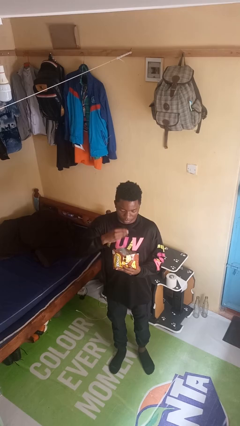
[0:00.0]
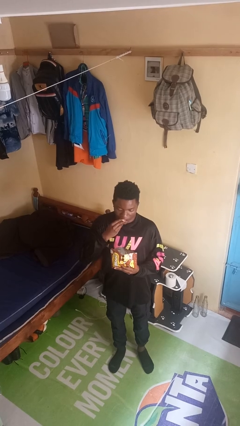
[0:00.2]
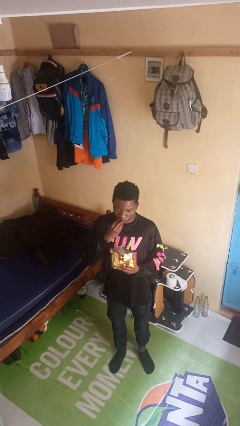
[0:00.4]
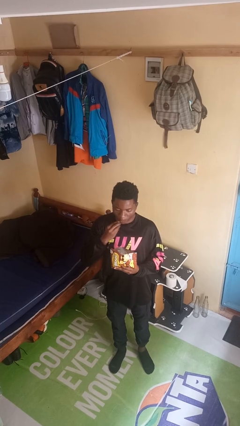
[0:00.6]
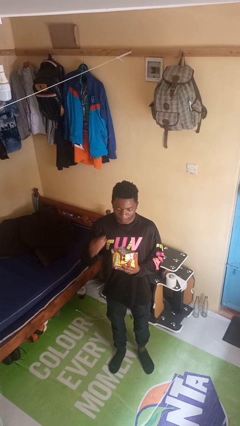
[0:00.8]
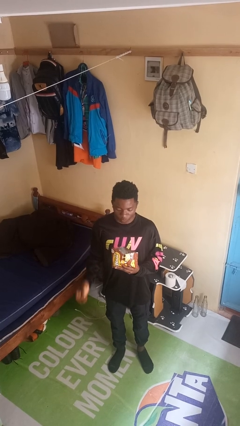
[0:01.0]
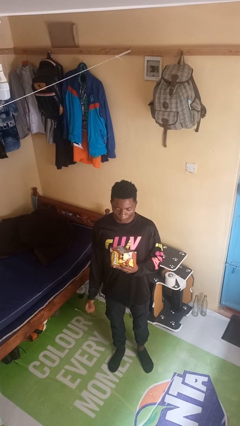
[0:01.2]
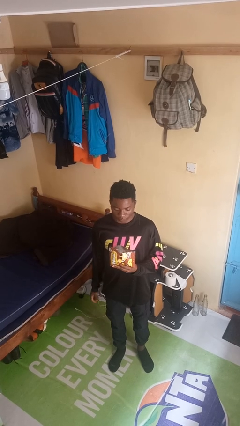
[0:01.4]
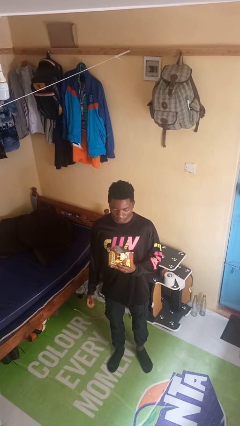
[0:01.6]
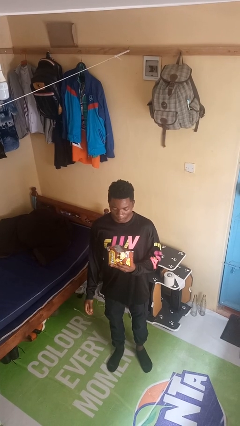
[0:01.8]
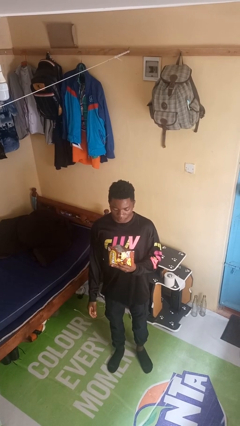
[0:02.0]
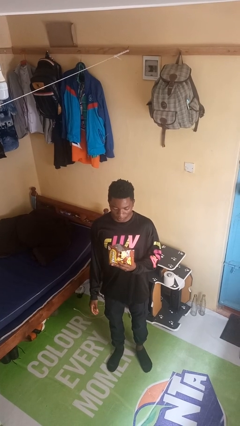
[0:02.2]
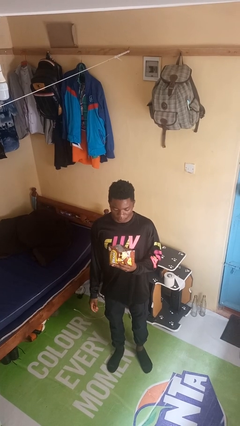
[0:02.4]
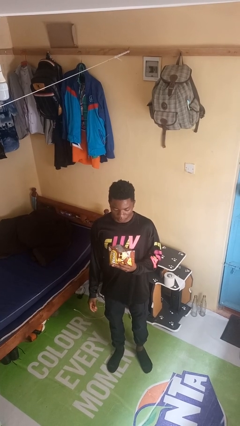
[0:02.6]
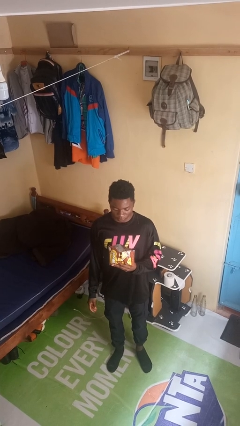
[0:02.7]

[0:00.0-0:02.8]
person eats snack from bag

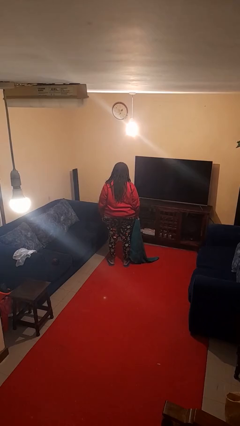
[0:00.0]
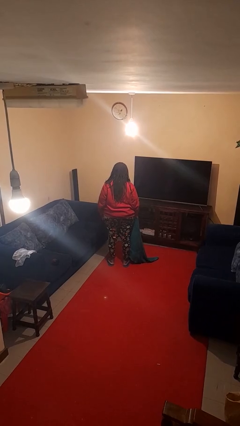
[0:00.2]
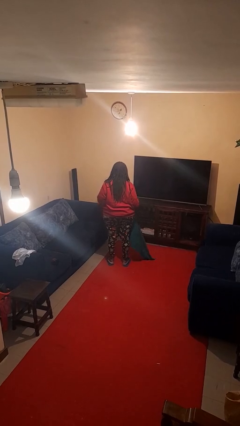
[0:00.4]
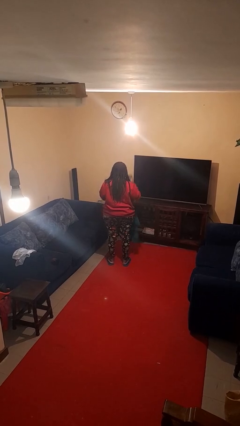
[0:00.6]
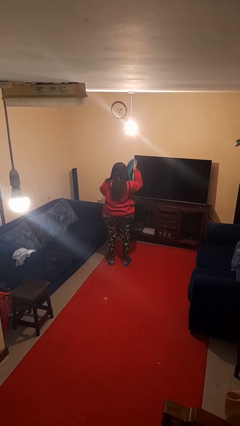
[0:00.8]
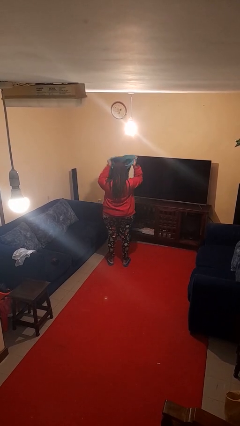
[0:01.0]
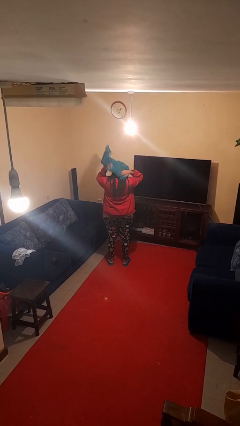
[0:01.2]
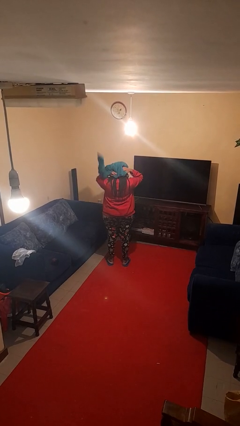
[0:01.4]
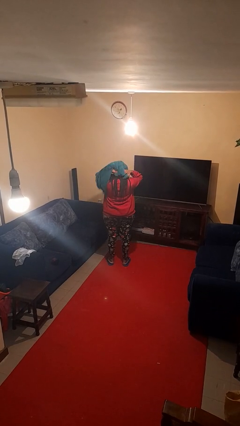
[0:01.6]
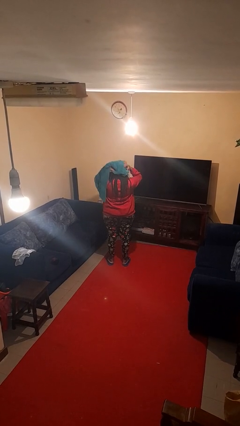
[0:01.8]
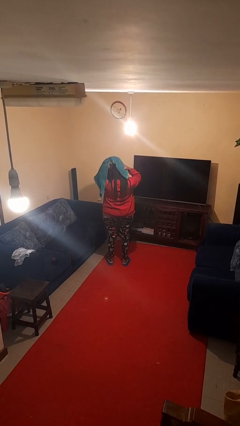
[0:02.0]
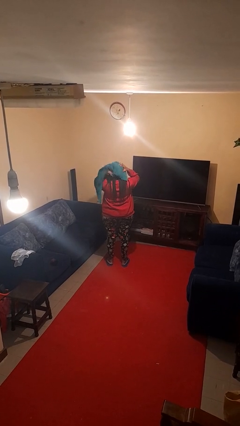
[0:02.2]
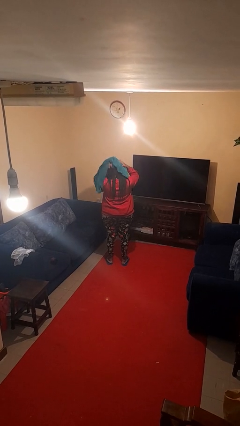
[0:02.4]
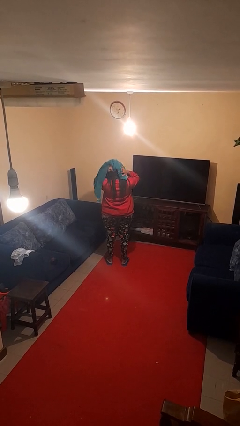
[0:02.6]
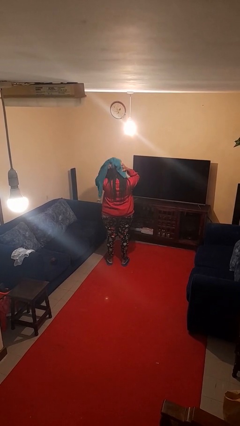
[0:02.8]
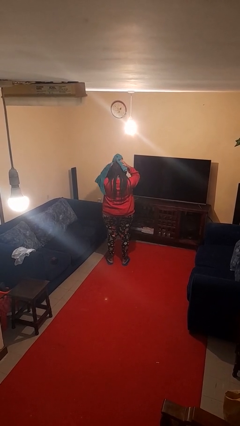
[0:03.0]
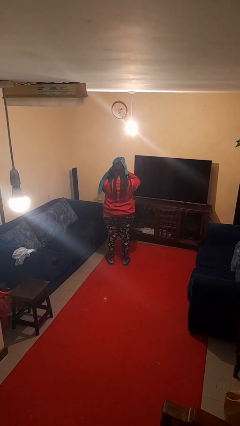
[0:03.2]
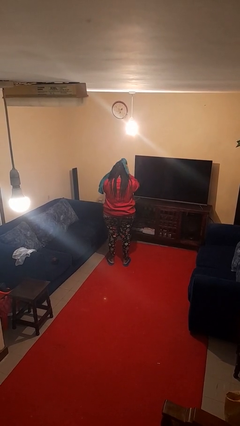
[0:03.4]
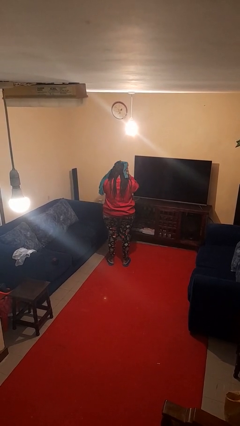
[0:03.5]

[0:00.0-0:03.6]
person dries hair with towel

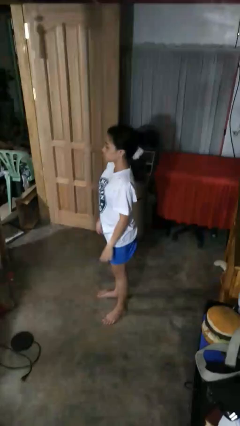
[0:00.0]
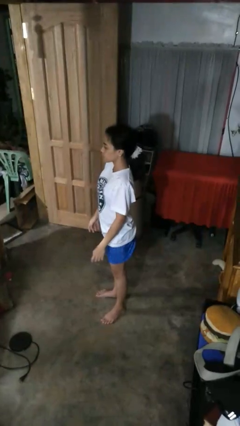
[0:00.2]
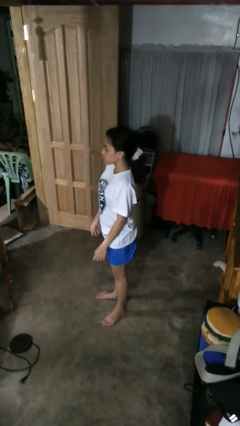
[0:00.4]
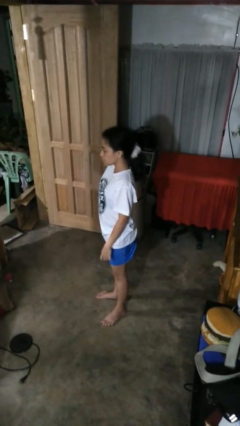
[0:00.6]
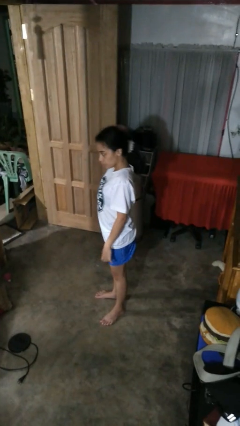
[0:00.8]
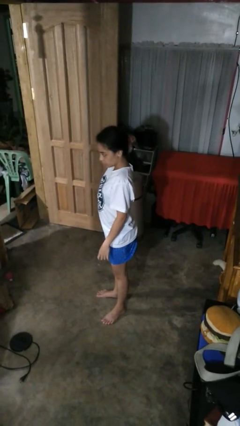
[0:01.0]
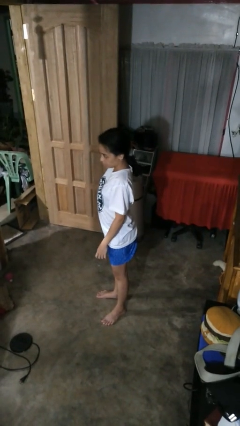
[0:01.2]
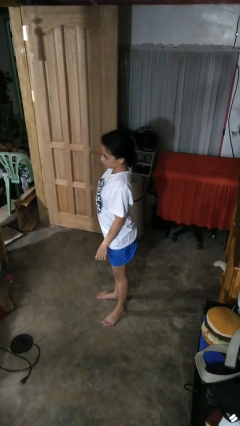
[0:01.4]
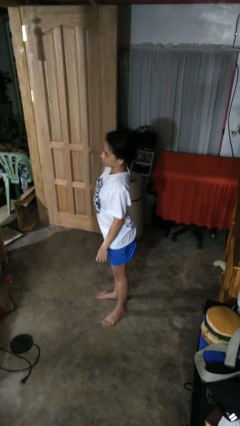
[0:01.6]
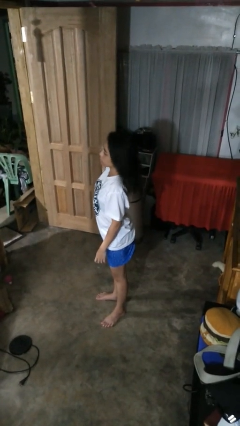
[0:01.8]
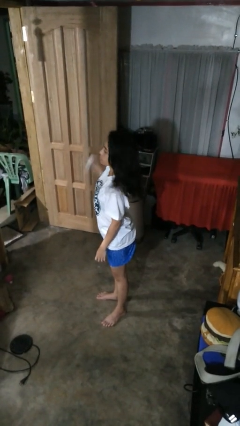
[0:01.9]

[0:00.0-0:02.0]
person takes off hairtie

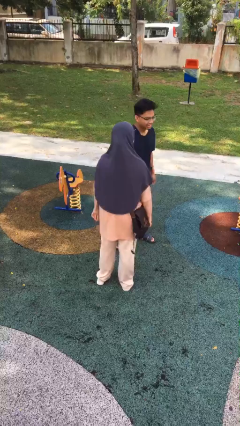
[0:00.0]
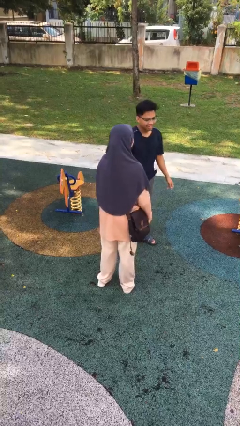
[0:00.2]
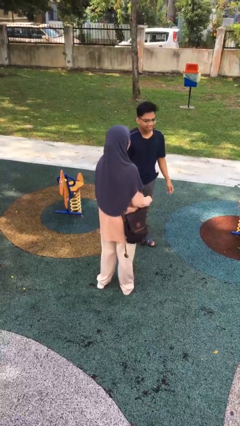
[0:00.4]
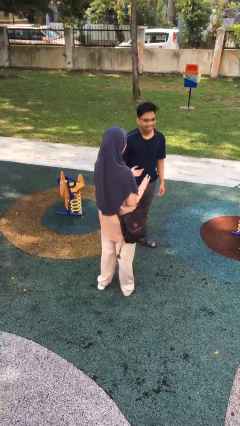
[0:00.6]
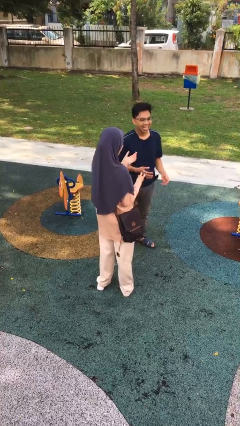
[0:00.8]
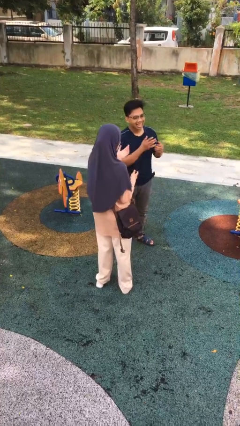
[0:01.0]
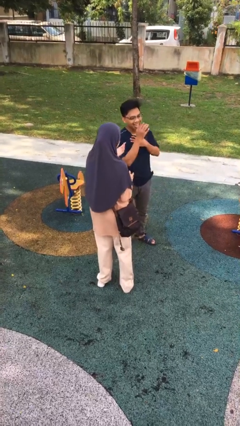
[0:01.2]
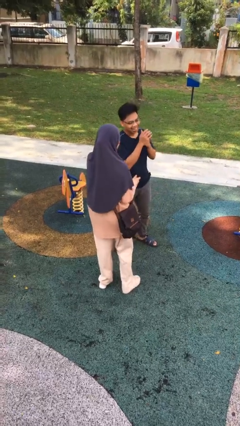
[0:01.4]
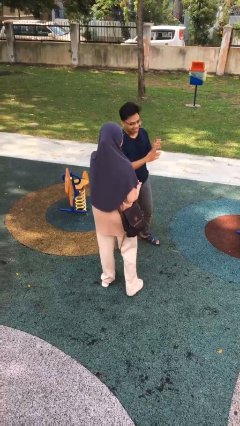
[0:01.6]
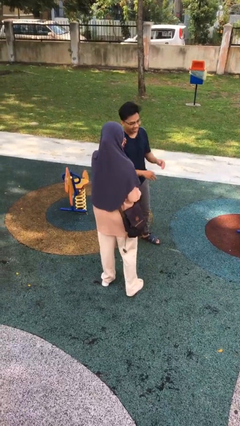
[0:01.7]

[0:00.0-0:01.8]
person laughs with person

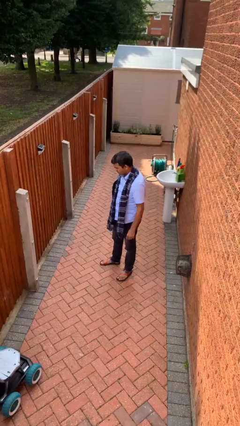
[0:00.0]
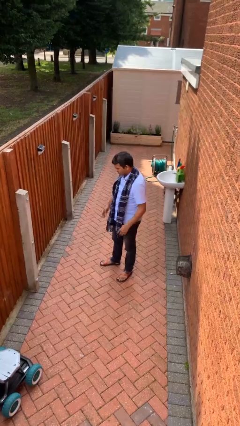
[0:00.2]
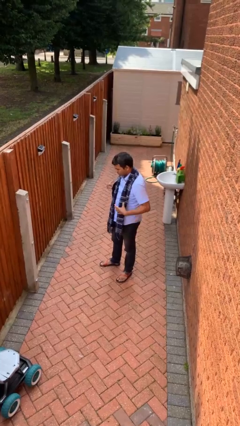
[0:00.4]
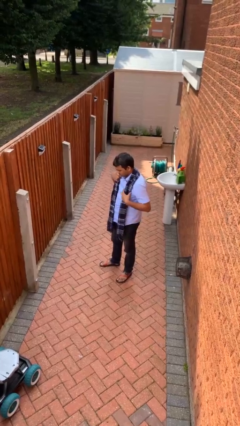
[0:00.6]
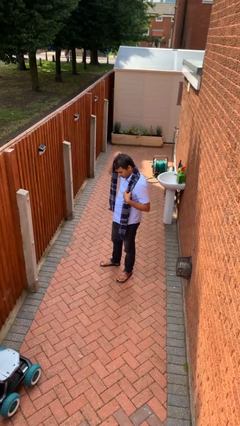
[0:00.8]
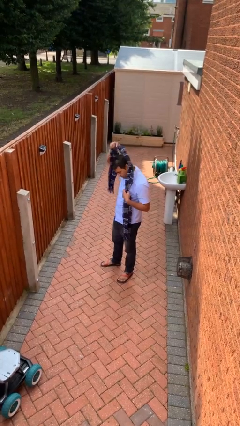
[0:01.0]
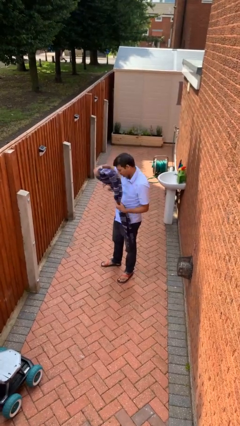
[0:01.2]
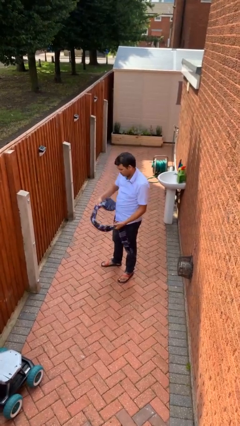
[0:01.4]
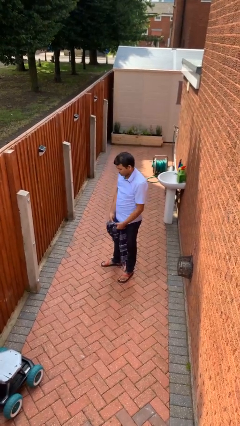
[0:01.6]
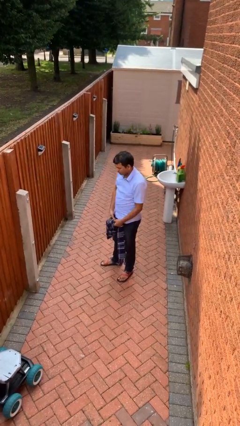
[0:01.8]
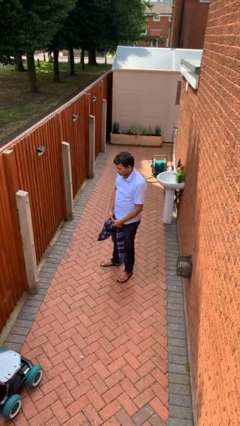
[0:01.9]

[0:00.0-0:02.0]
person takes off scarf

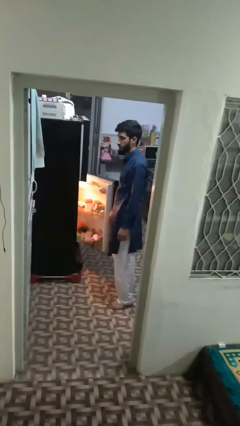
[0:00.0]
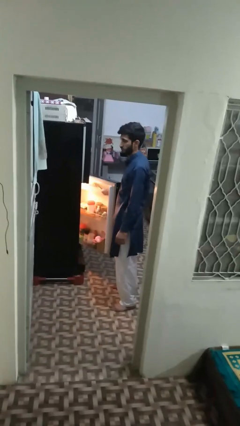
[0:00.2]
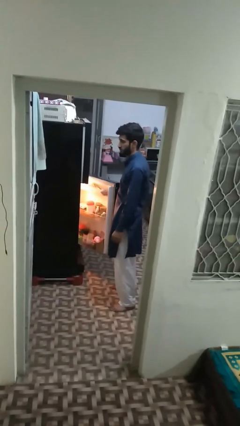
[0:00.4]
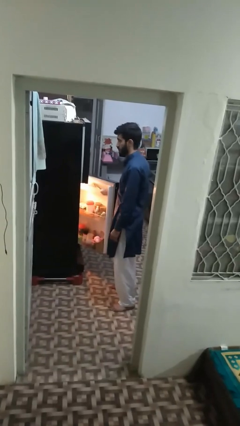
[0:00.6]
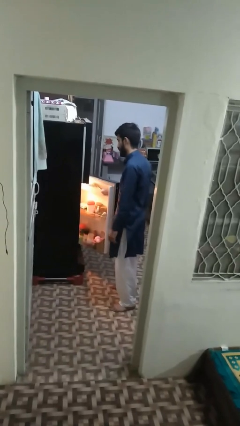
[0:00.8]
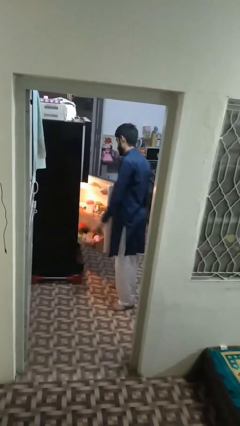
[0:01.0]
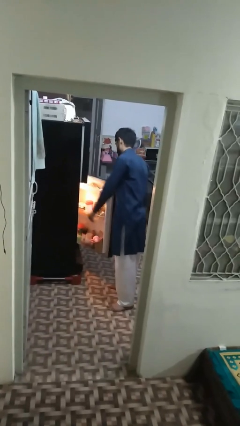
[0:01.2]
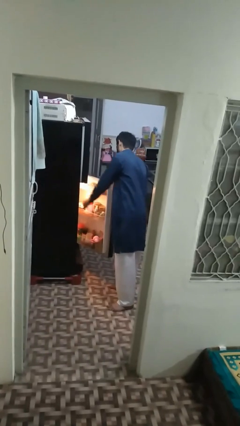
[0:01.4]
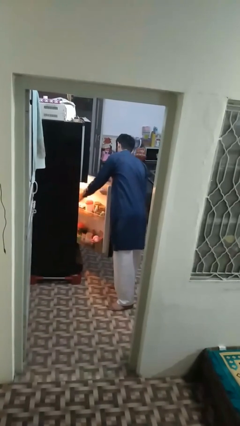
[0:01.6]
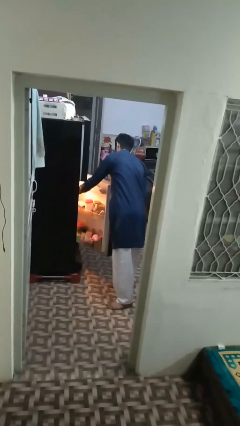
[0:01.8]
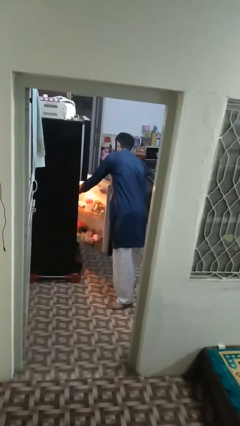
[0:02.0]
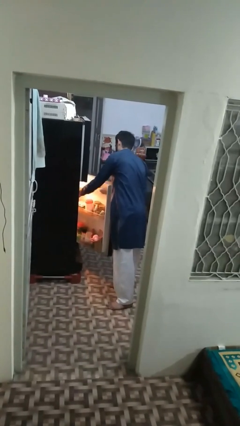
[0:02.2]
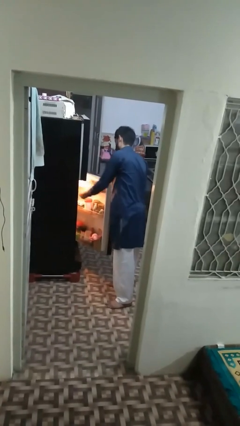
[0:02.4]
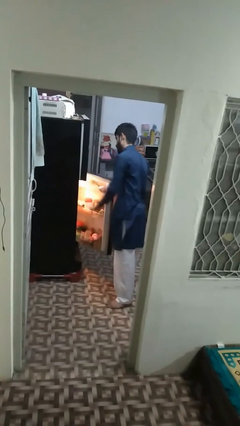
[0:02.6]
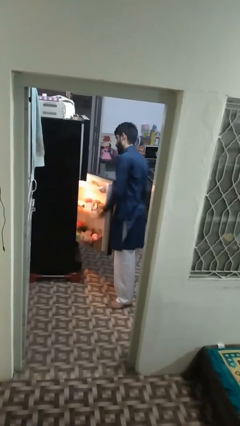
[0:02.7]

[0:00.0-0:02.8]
person takes object from refrigerator

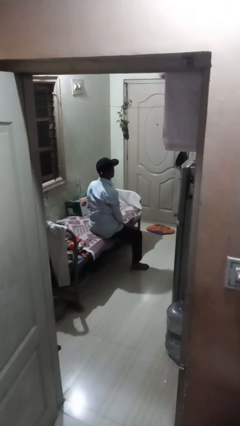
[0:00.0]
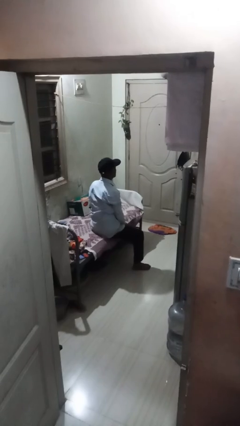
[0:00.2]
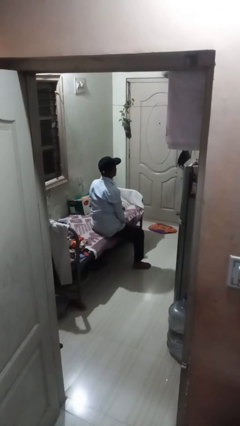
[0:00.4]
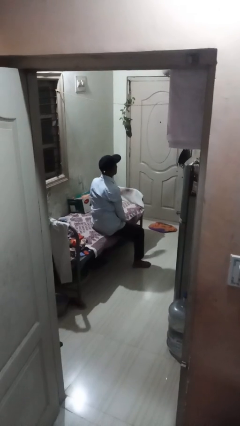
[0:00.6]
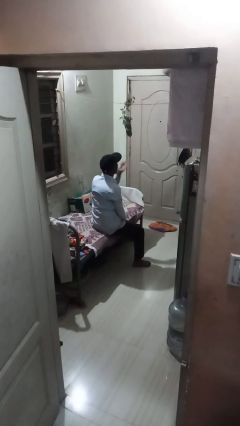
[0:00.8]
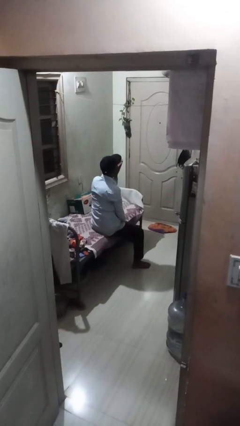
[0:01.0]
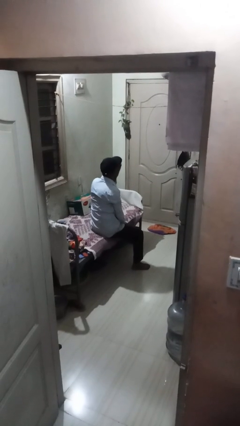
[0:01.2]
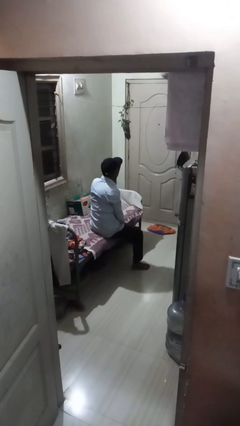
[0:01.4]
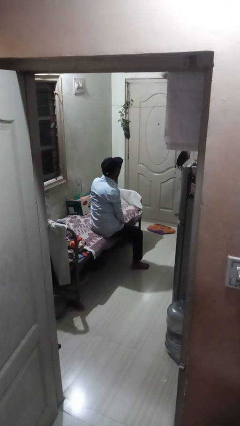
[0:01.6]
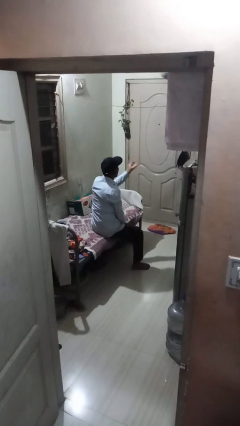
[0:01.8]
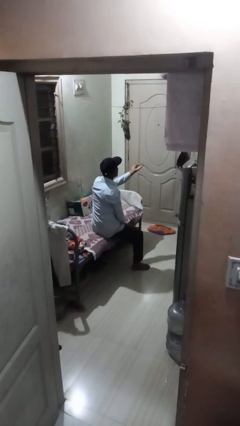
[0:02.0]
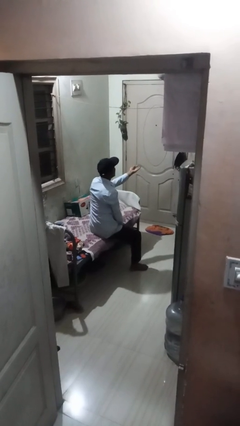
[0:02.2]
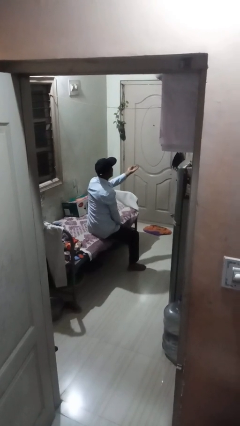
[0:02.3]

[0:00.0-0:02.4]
person gestures blow kiss
